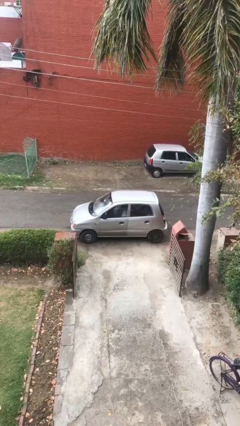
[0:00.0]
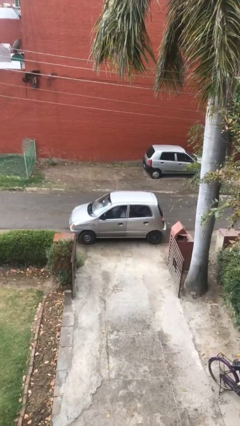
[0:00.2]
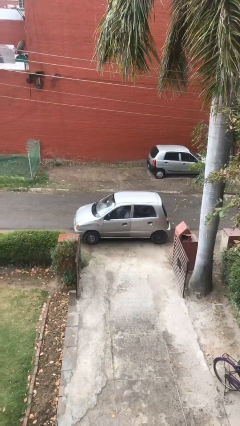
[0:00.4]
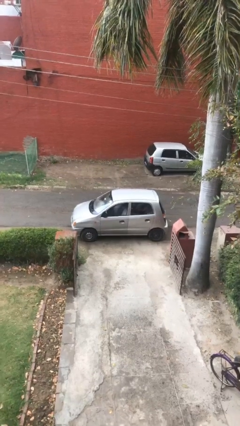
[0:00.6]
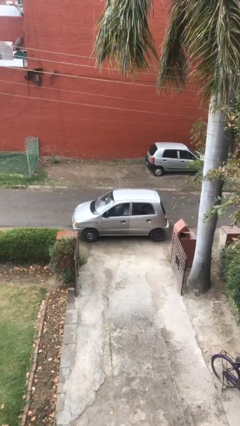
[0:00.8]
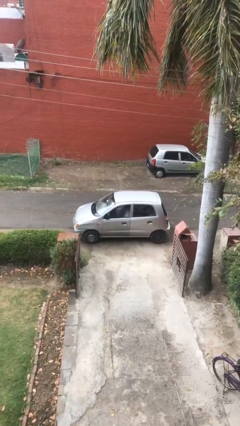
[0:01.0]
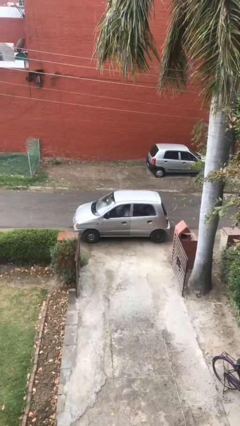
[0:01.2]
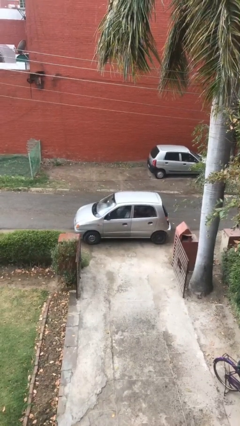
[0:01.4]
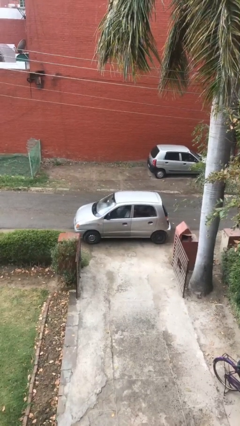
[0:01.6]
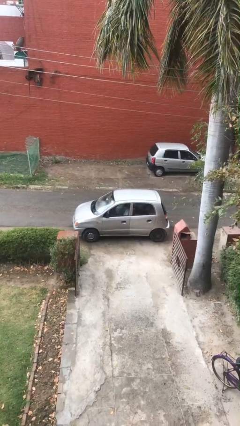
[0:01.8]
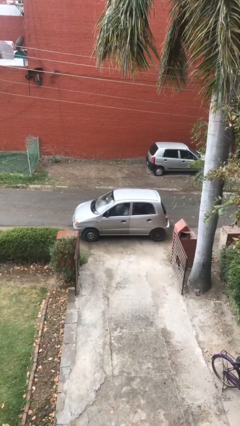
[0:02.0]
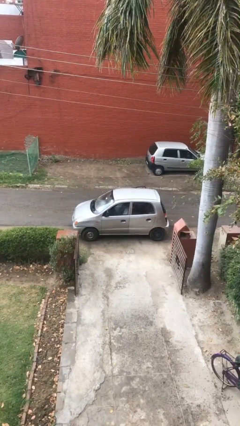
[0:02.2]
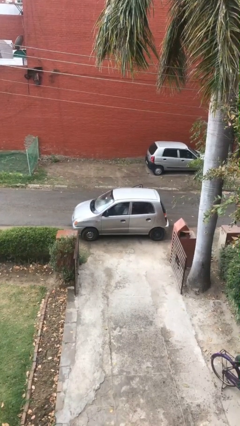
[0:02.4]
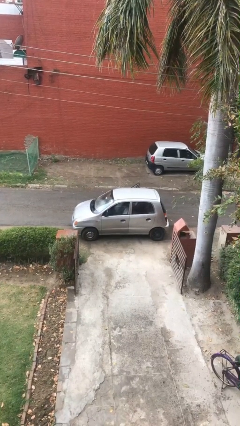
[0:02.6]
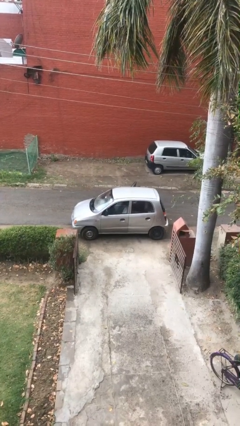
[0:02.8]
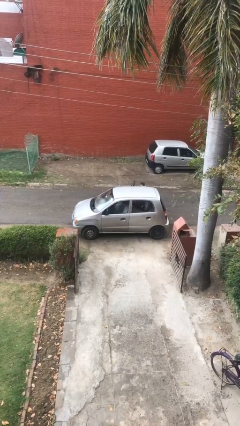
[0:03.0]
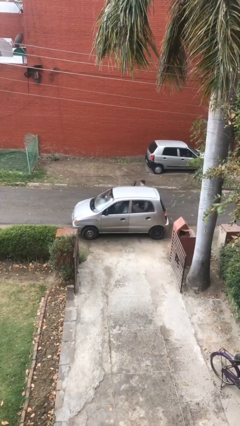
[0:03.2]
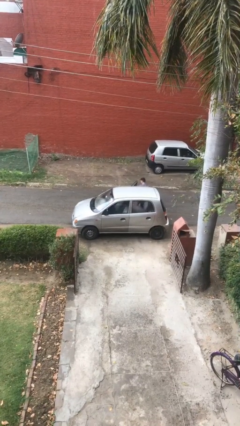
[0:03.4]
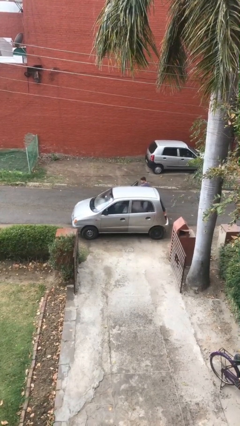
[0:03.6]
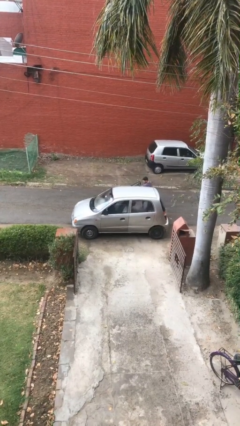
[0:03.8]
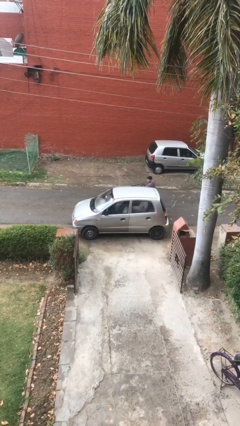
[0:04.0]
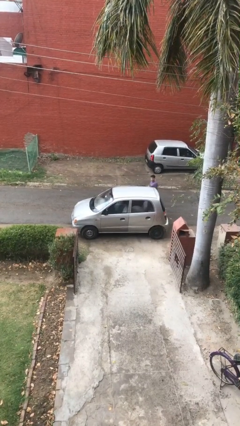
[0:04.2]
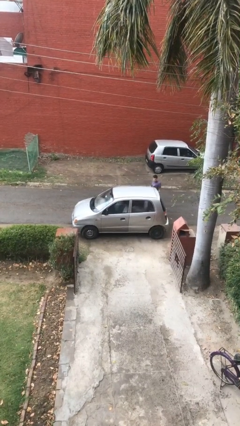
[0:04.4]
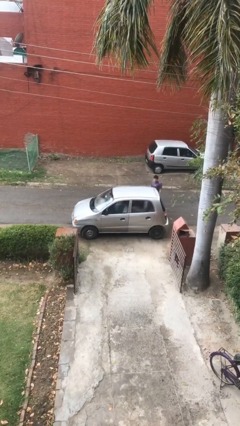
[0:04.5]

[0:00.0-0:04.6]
car drops off person

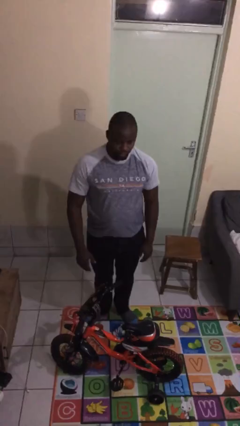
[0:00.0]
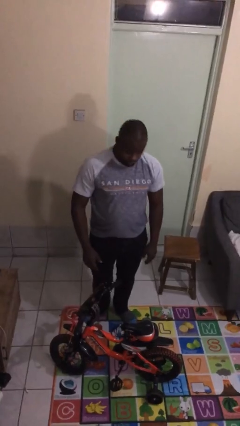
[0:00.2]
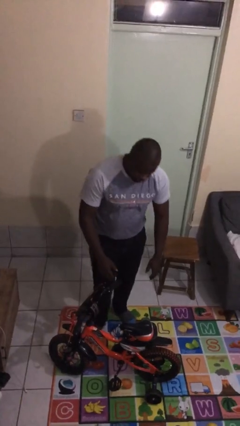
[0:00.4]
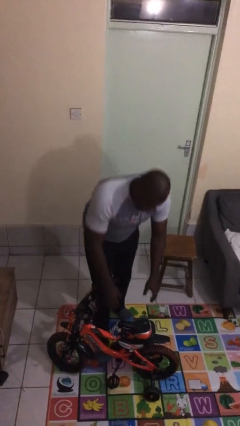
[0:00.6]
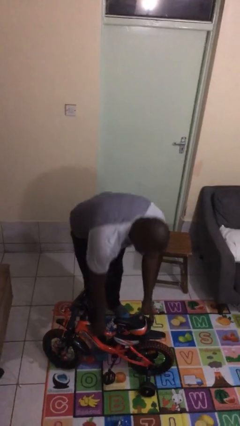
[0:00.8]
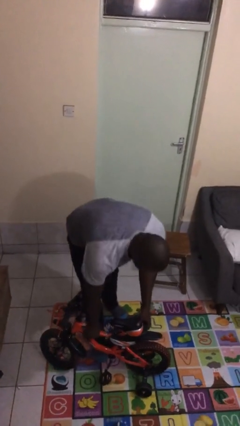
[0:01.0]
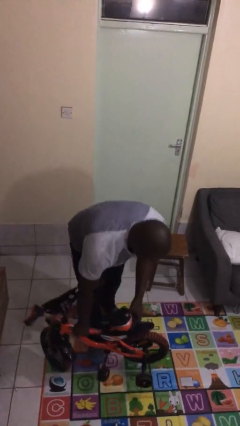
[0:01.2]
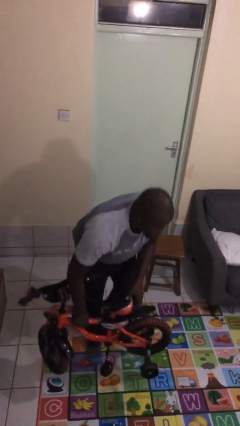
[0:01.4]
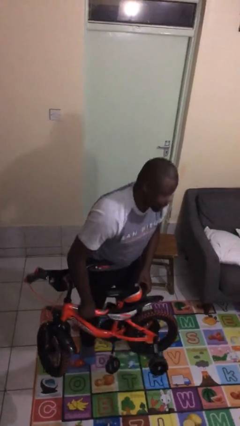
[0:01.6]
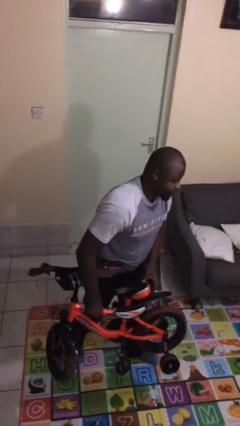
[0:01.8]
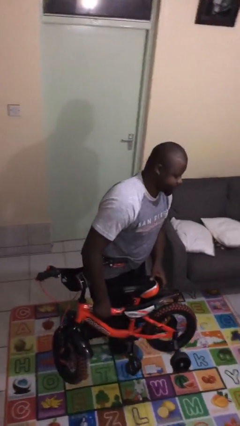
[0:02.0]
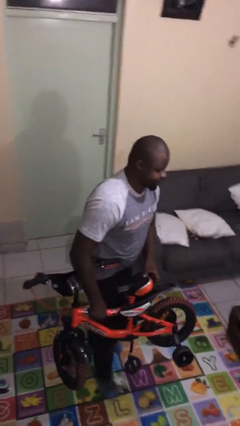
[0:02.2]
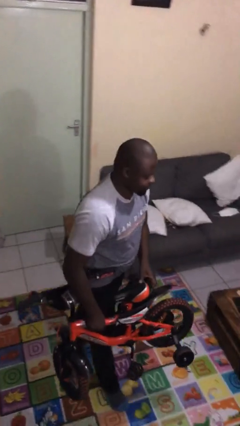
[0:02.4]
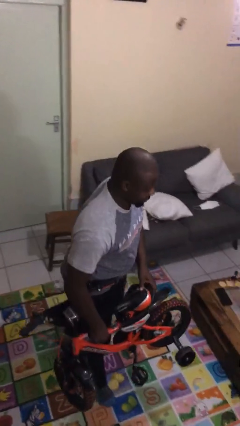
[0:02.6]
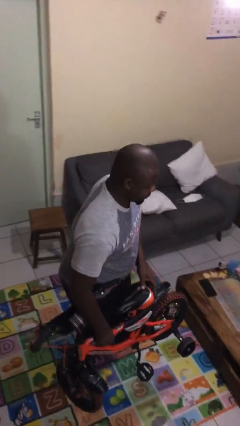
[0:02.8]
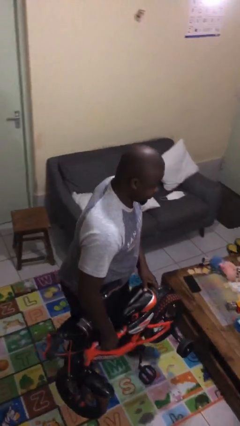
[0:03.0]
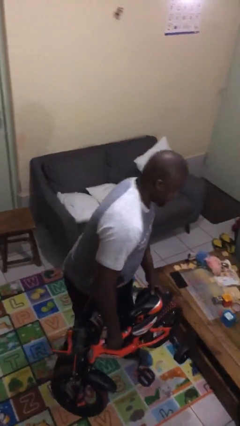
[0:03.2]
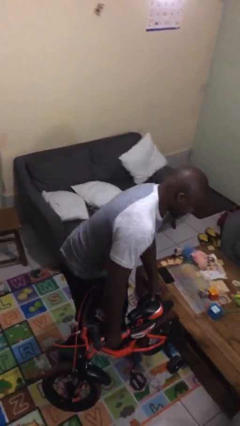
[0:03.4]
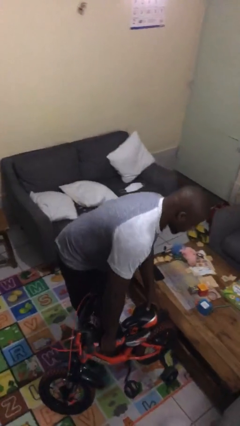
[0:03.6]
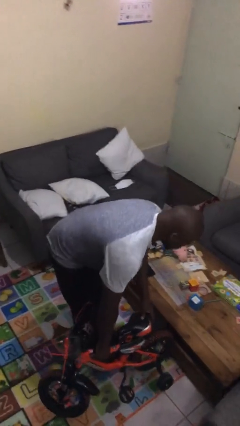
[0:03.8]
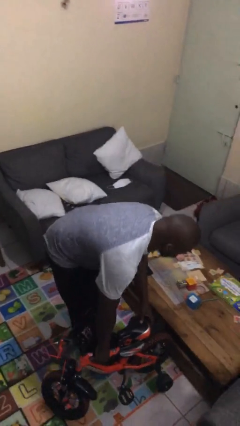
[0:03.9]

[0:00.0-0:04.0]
person carries bicycle

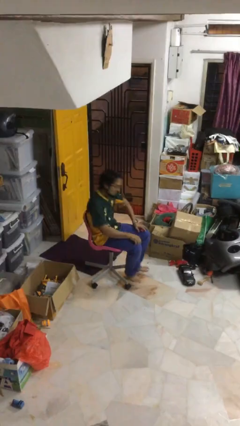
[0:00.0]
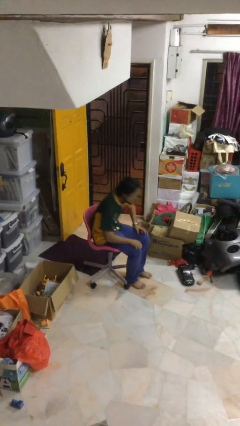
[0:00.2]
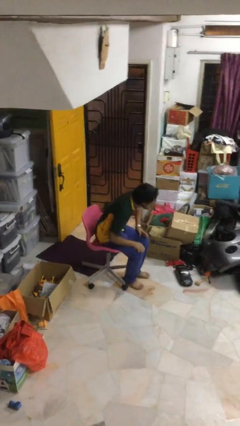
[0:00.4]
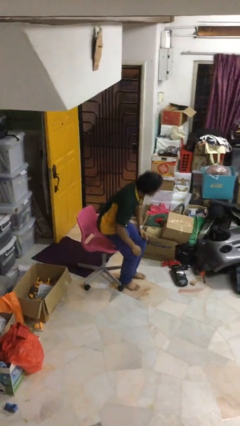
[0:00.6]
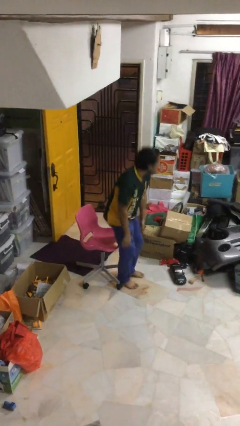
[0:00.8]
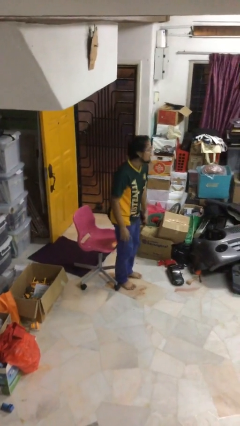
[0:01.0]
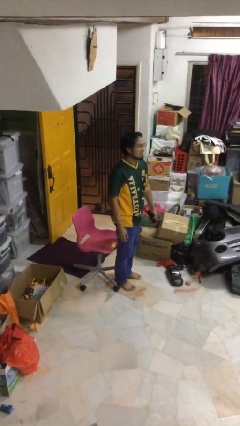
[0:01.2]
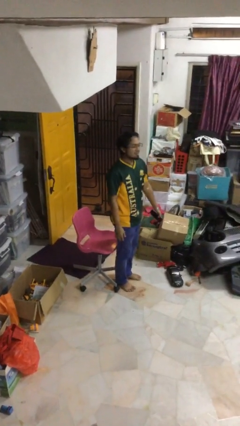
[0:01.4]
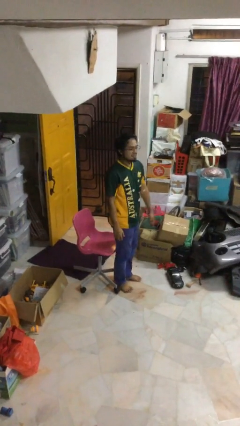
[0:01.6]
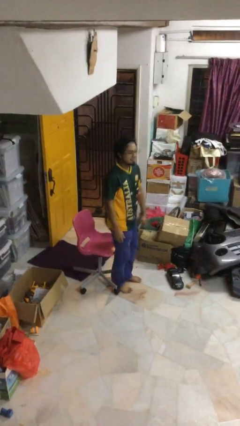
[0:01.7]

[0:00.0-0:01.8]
person stands up

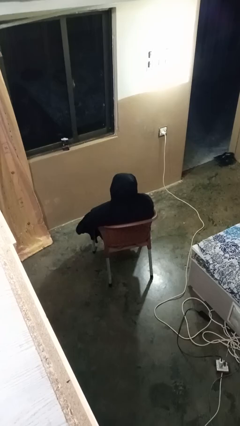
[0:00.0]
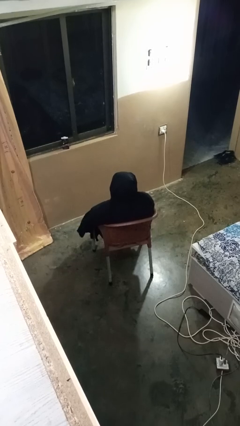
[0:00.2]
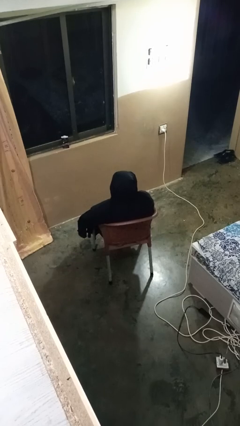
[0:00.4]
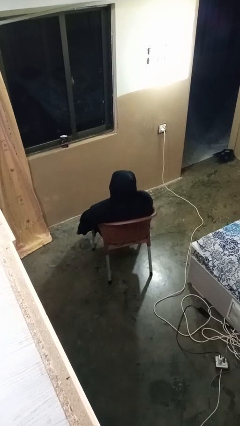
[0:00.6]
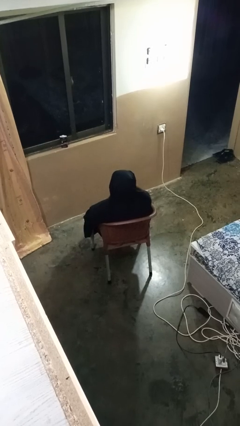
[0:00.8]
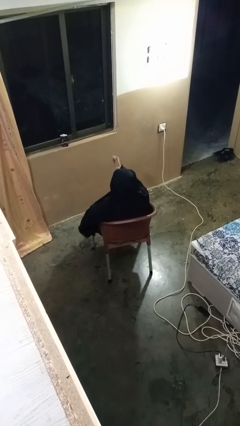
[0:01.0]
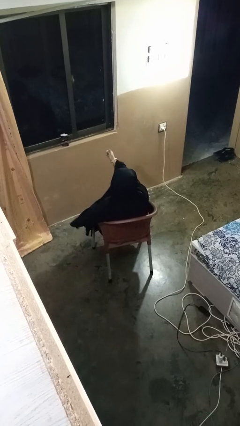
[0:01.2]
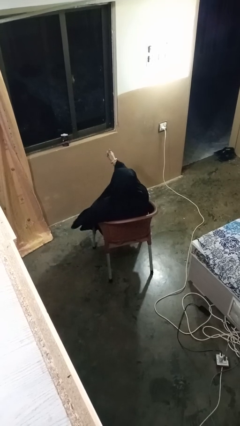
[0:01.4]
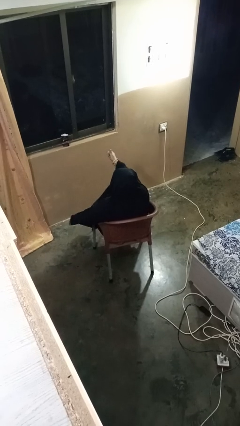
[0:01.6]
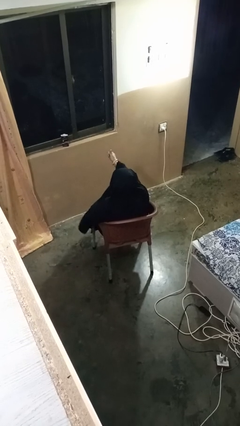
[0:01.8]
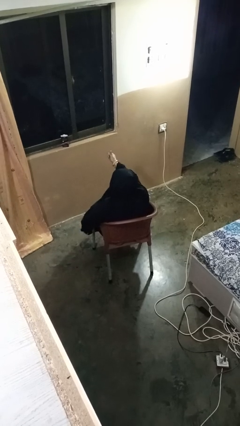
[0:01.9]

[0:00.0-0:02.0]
person gestures thumbs up

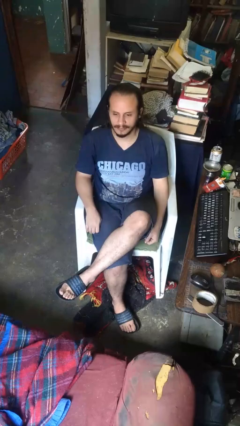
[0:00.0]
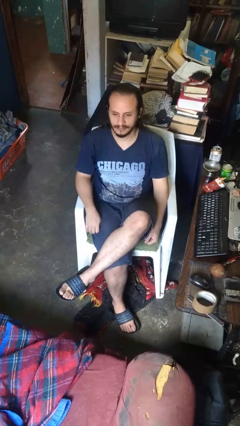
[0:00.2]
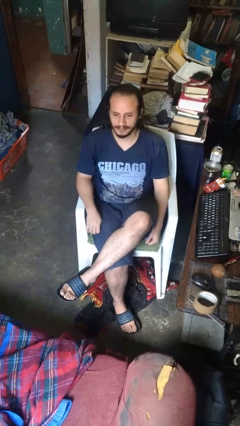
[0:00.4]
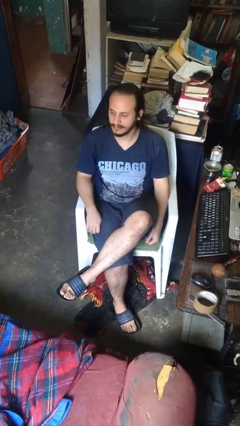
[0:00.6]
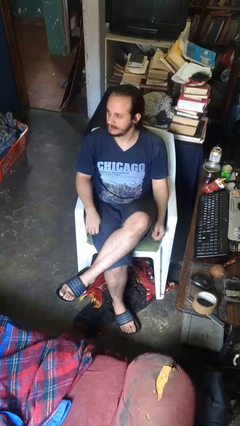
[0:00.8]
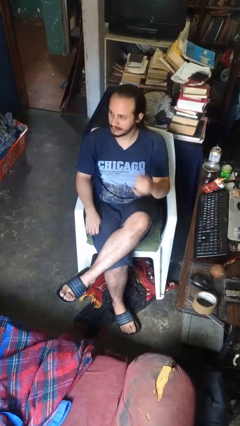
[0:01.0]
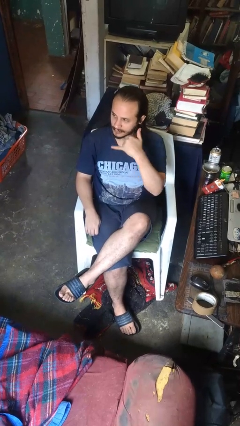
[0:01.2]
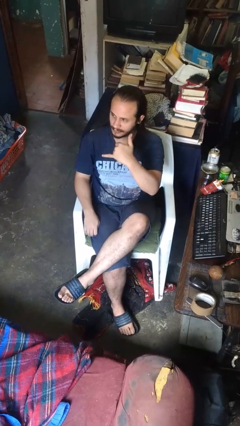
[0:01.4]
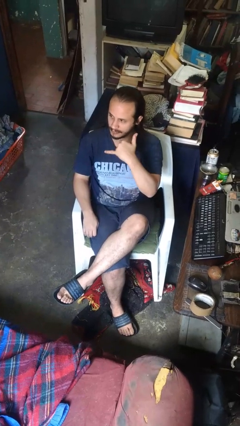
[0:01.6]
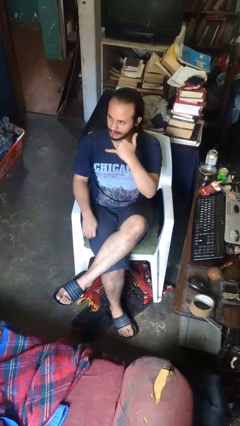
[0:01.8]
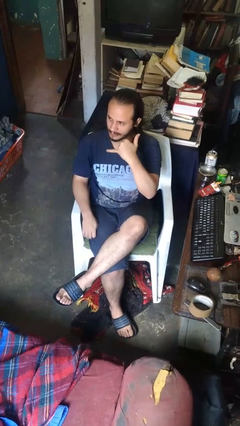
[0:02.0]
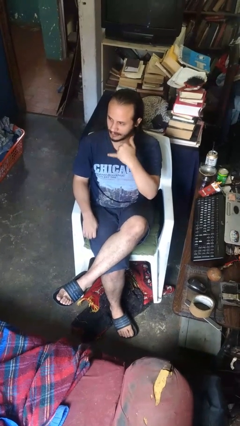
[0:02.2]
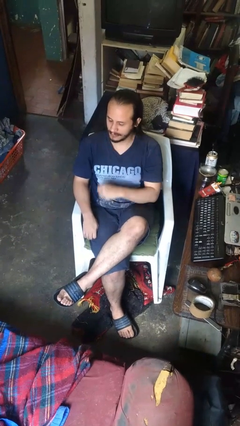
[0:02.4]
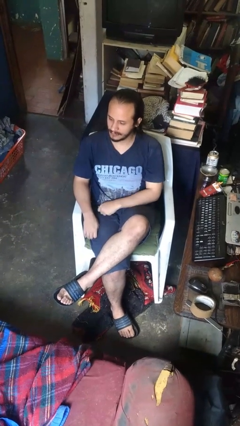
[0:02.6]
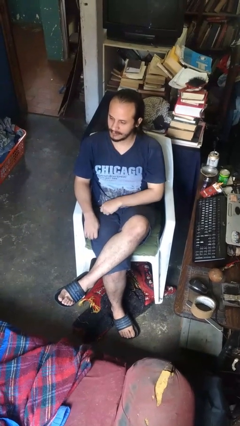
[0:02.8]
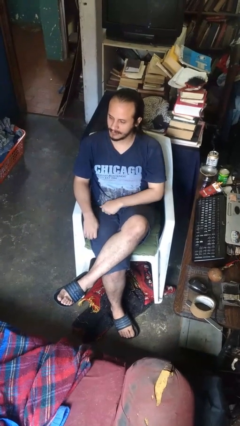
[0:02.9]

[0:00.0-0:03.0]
person gestures call me

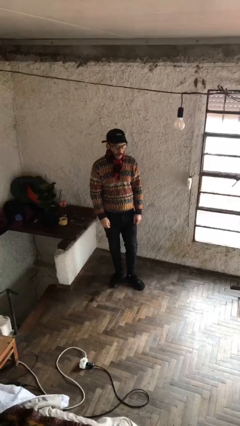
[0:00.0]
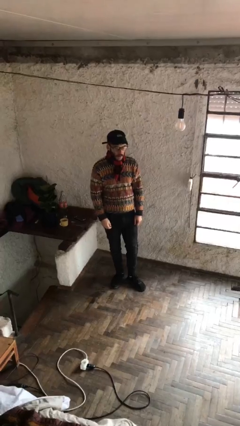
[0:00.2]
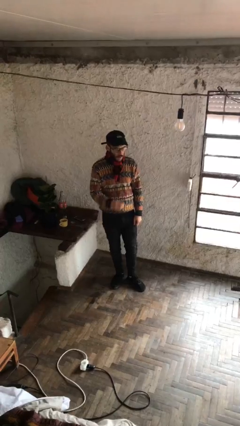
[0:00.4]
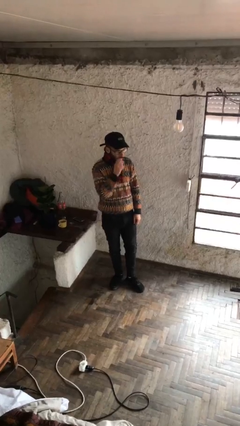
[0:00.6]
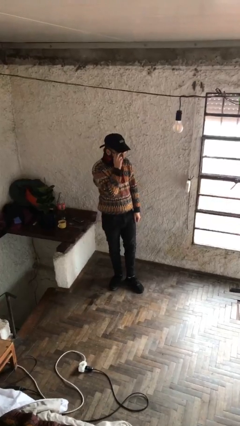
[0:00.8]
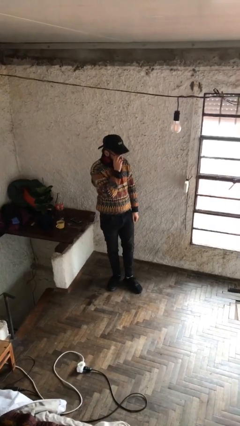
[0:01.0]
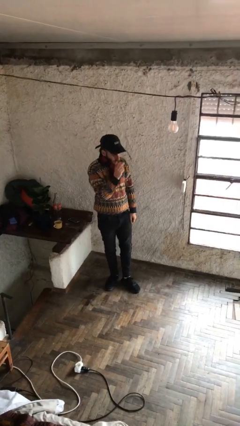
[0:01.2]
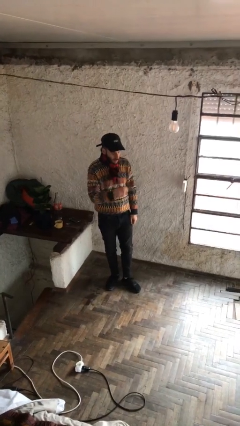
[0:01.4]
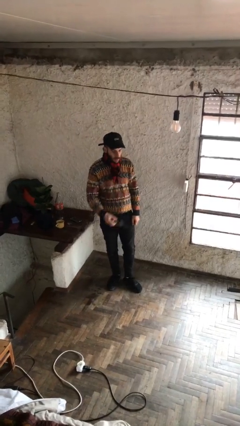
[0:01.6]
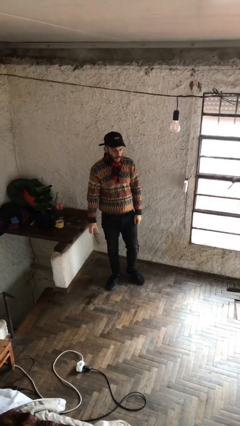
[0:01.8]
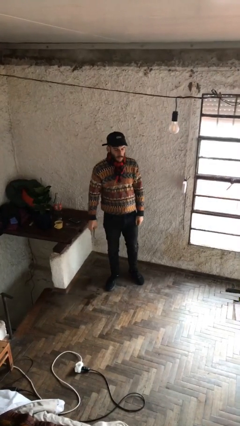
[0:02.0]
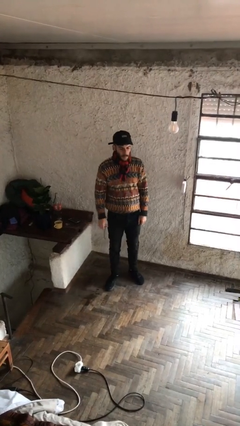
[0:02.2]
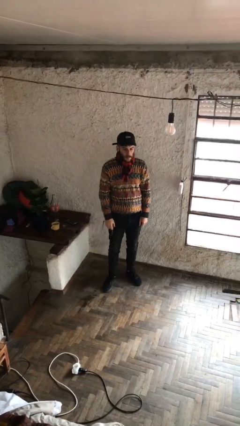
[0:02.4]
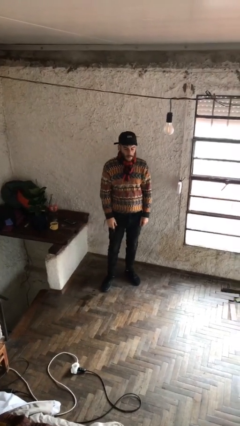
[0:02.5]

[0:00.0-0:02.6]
person takes off glasses
